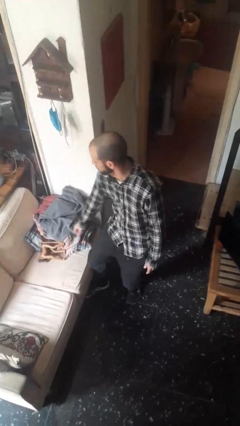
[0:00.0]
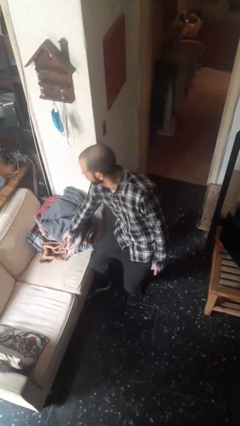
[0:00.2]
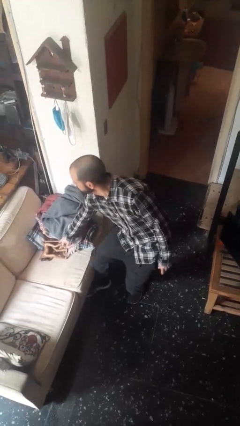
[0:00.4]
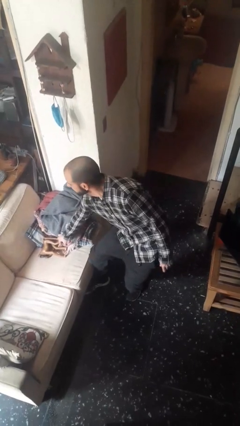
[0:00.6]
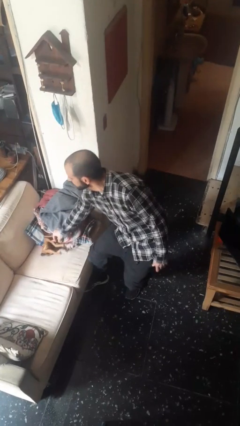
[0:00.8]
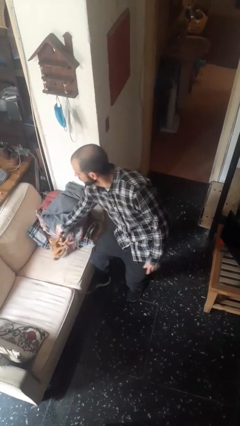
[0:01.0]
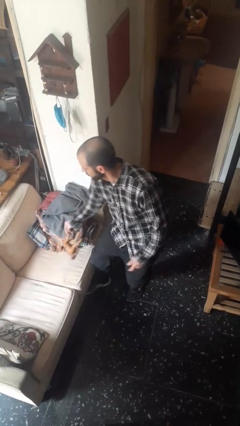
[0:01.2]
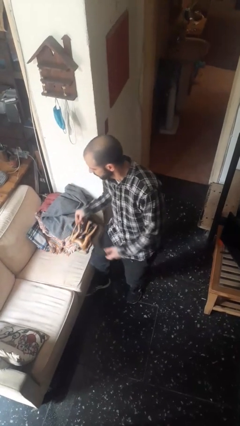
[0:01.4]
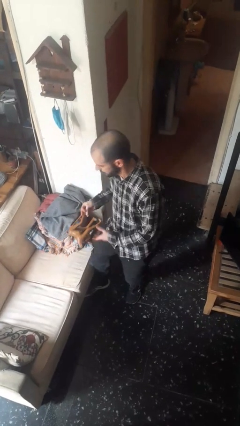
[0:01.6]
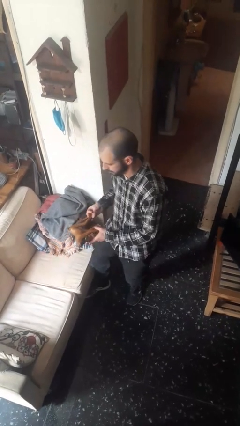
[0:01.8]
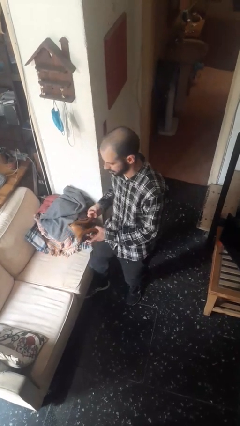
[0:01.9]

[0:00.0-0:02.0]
person picks up object from couch

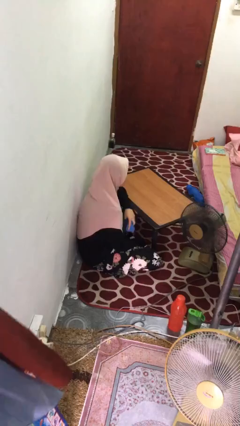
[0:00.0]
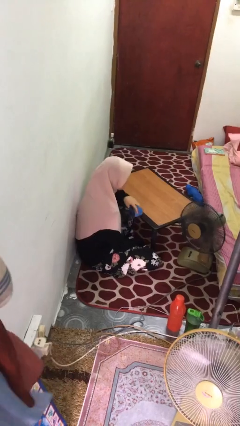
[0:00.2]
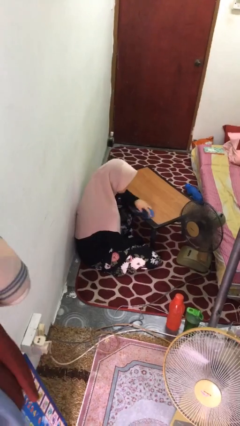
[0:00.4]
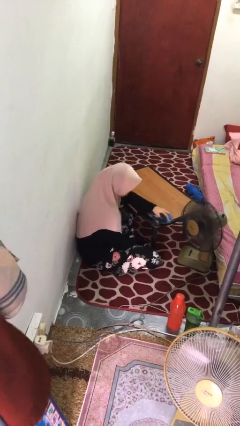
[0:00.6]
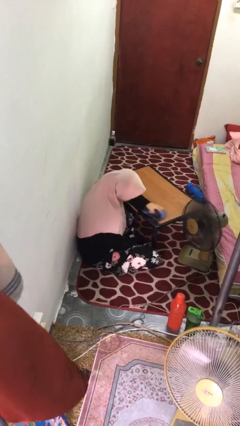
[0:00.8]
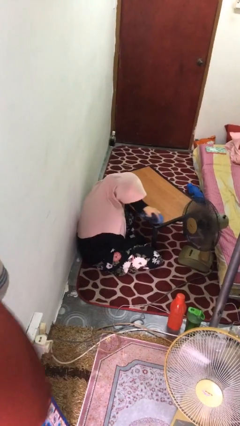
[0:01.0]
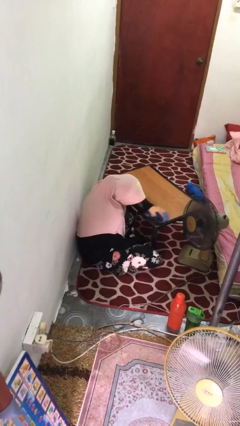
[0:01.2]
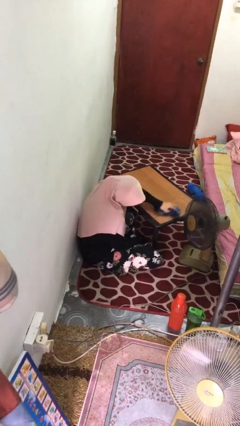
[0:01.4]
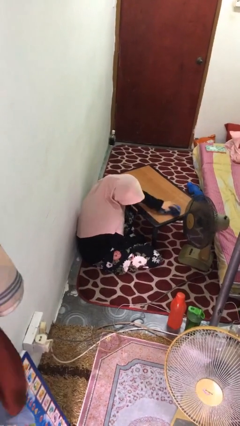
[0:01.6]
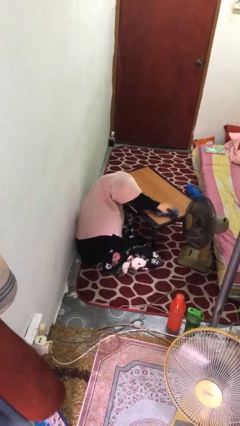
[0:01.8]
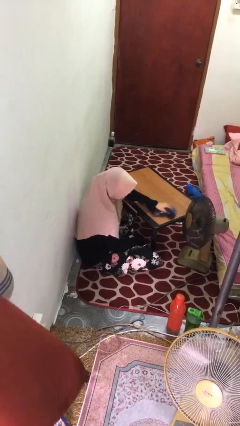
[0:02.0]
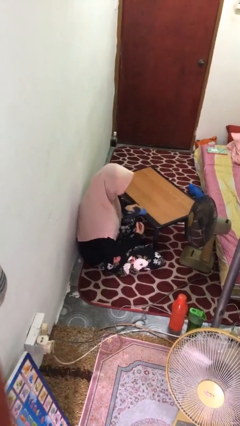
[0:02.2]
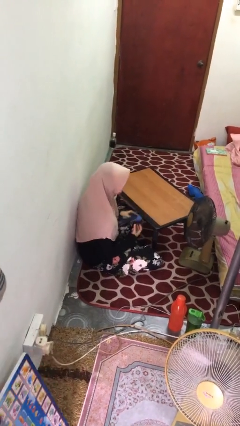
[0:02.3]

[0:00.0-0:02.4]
person cleans table with rag

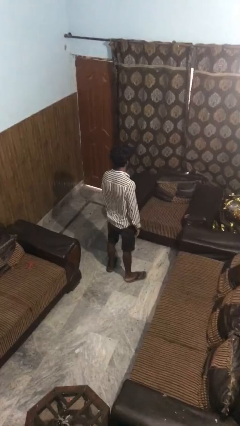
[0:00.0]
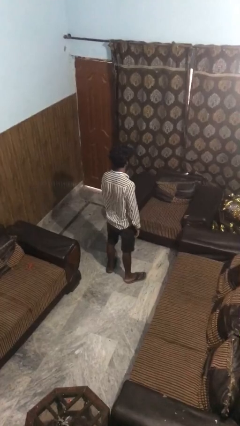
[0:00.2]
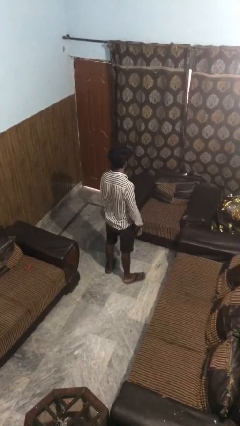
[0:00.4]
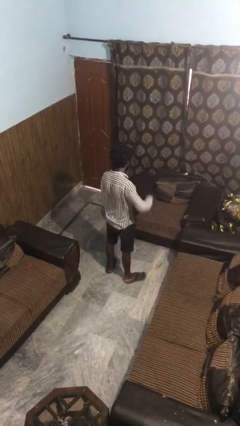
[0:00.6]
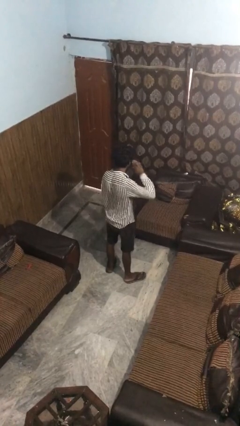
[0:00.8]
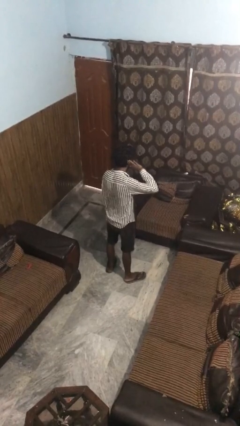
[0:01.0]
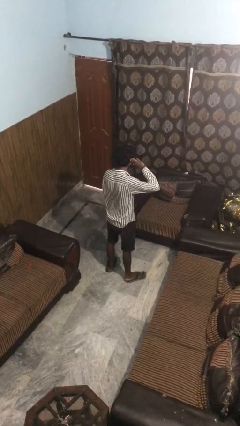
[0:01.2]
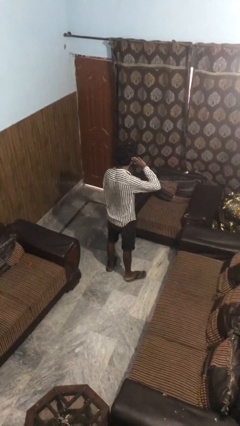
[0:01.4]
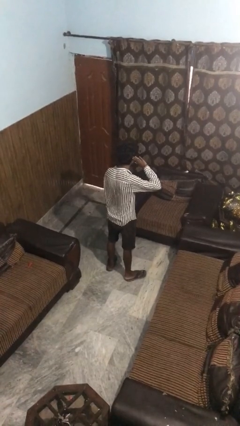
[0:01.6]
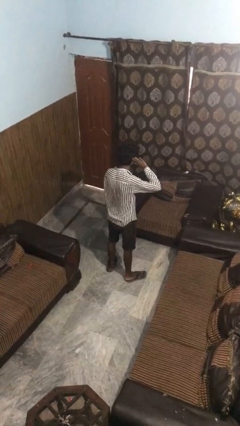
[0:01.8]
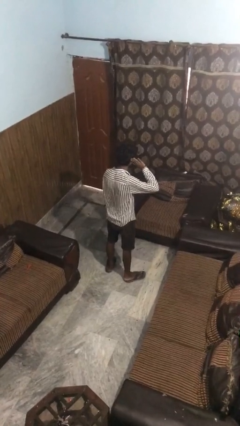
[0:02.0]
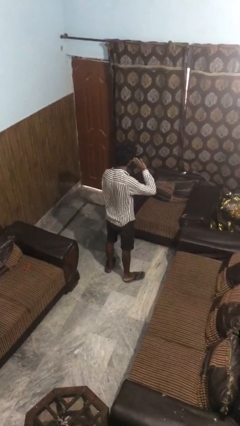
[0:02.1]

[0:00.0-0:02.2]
person gestures listen closely

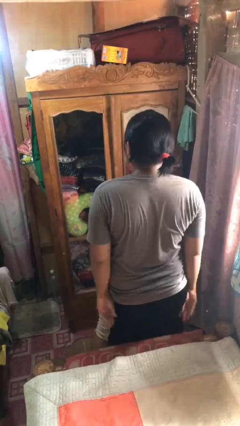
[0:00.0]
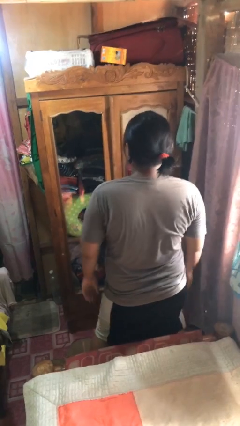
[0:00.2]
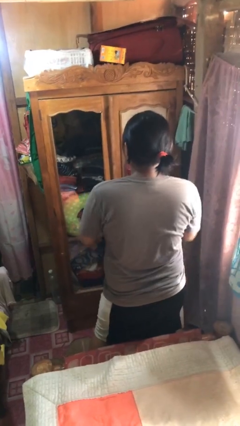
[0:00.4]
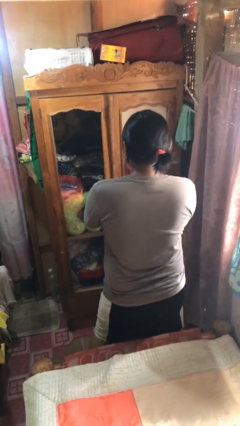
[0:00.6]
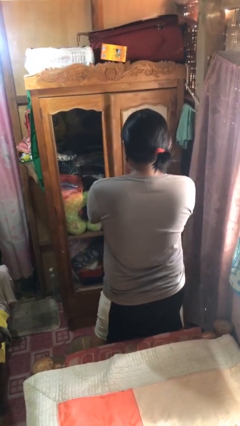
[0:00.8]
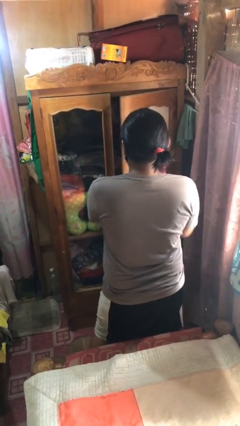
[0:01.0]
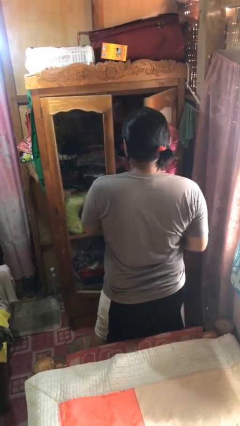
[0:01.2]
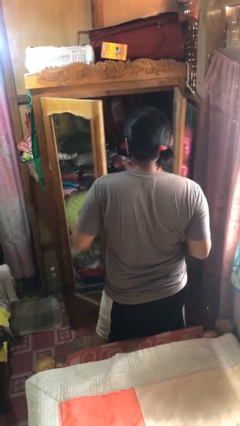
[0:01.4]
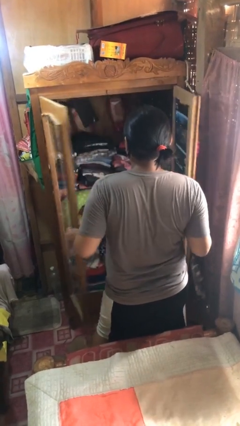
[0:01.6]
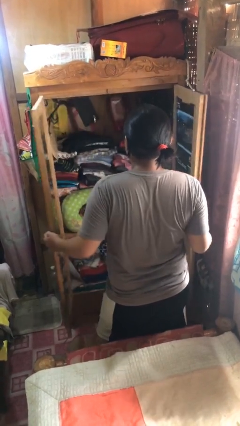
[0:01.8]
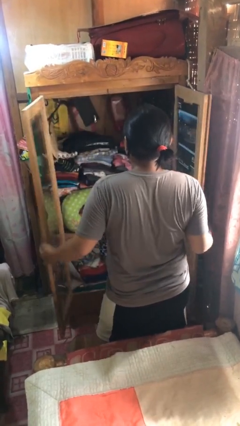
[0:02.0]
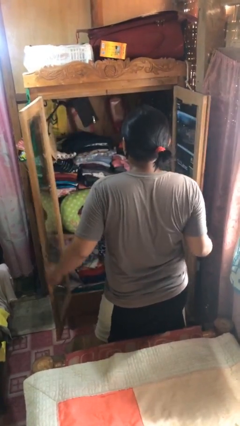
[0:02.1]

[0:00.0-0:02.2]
person opens closet door

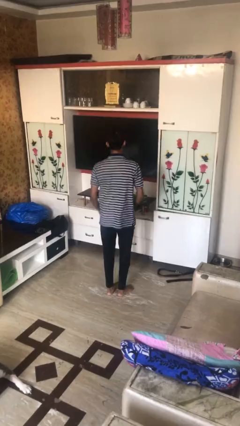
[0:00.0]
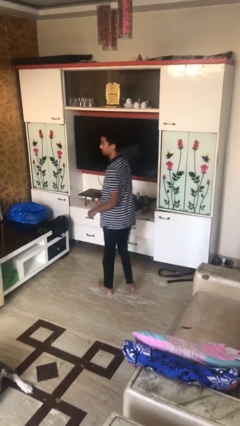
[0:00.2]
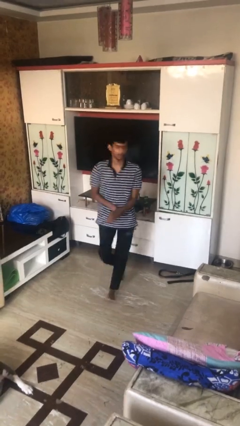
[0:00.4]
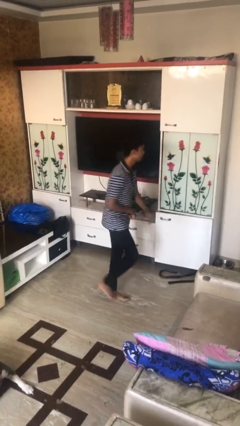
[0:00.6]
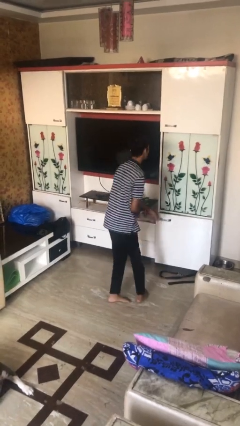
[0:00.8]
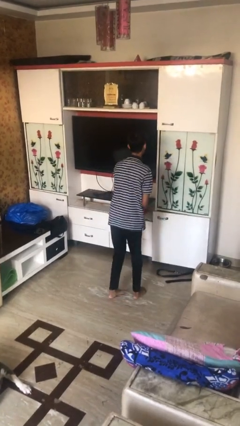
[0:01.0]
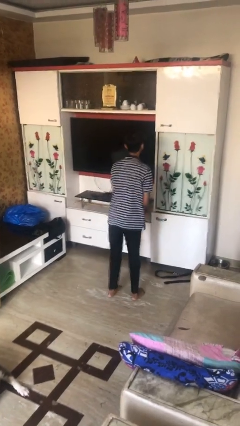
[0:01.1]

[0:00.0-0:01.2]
person twirls

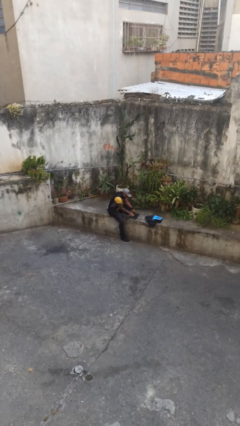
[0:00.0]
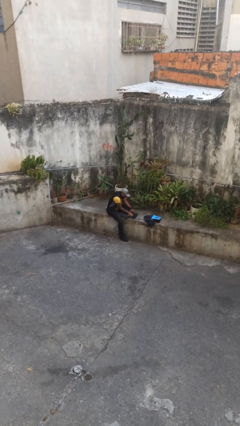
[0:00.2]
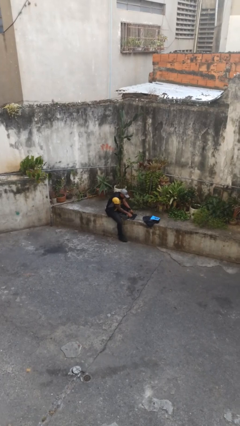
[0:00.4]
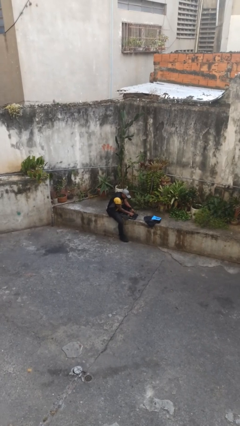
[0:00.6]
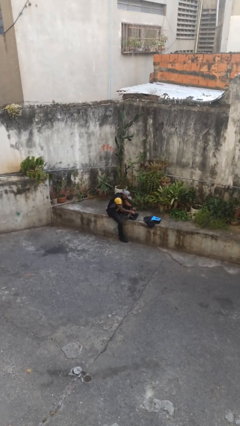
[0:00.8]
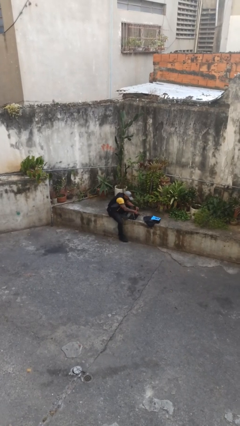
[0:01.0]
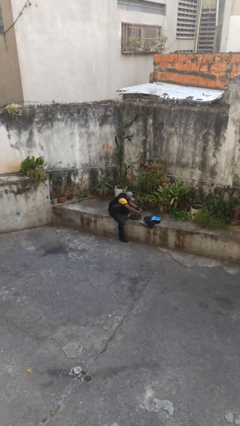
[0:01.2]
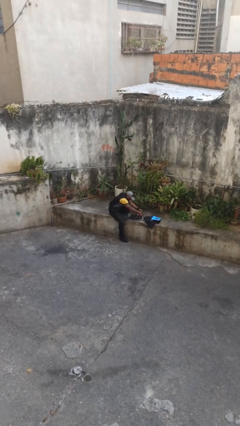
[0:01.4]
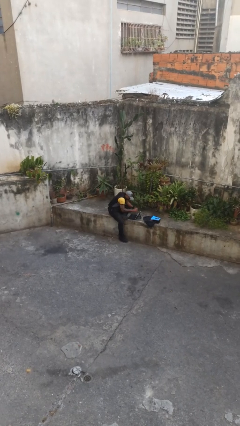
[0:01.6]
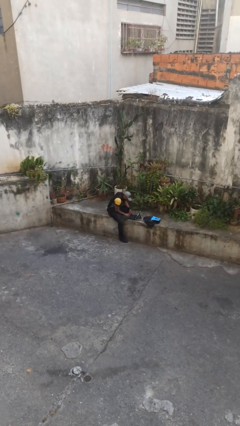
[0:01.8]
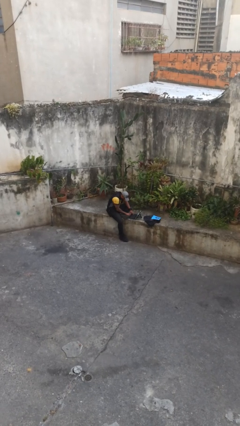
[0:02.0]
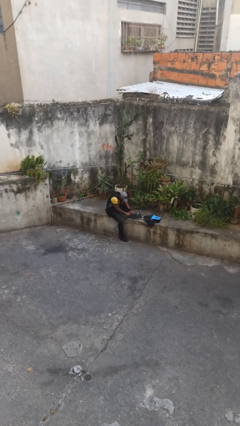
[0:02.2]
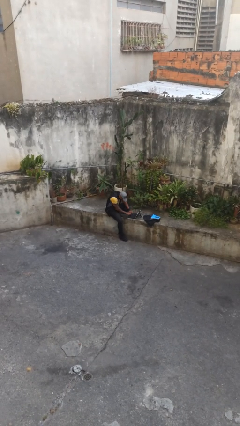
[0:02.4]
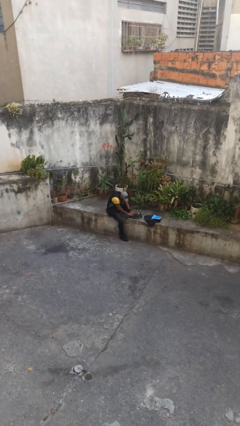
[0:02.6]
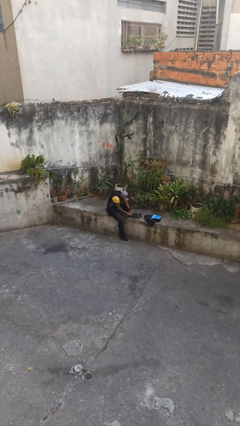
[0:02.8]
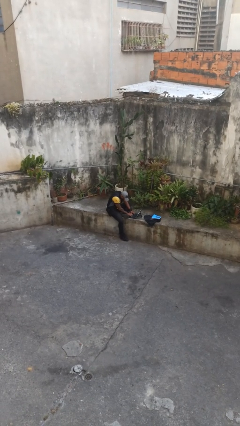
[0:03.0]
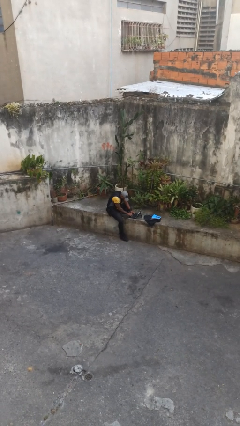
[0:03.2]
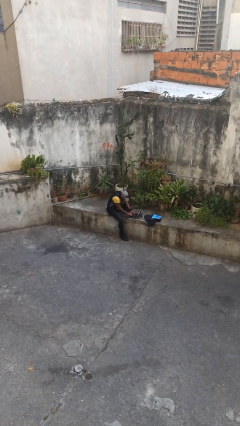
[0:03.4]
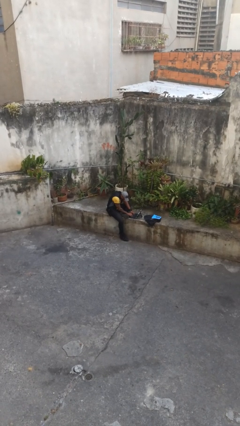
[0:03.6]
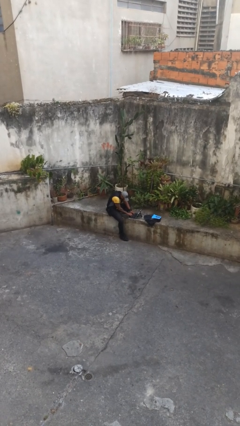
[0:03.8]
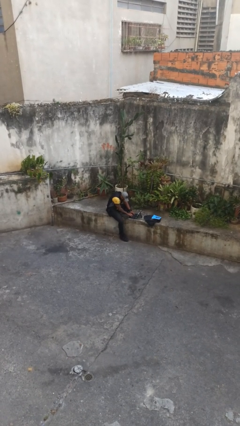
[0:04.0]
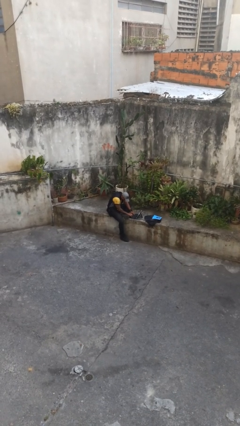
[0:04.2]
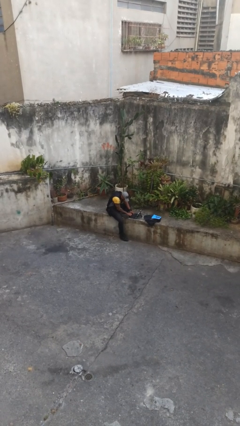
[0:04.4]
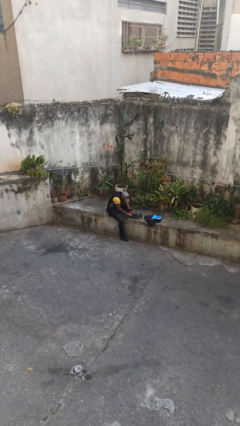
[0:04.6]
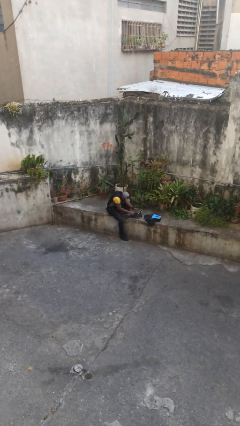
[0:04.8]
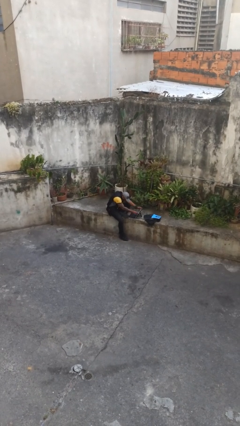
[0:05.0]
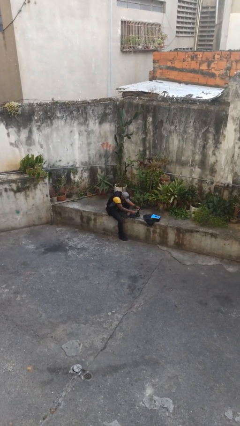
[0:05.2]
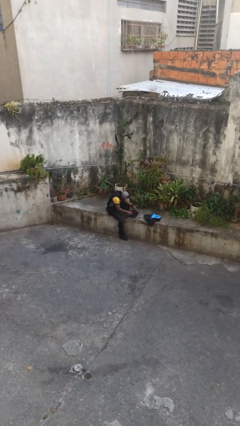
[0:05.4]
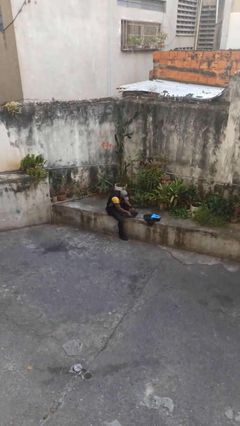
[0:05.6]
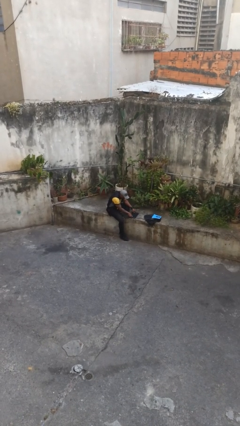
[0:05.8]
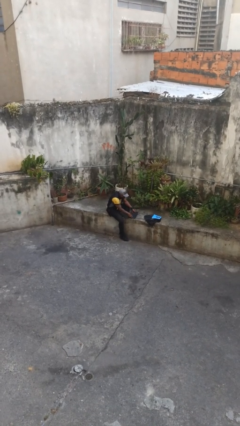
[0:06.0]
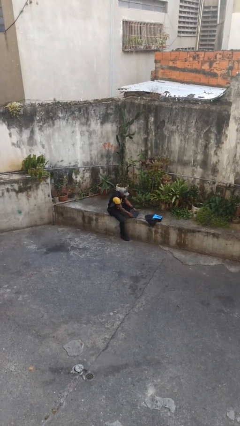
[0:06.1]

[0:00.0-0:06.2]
person interacts with laptop

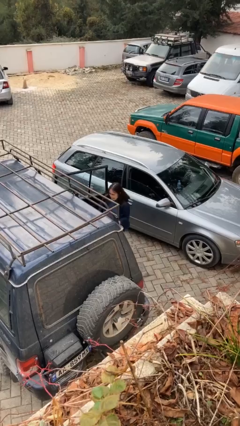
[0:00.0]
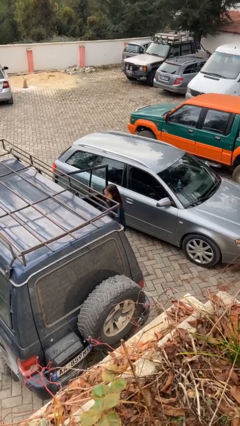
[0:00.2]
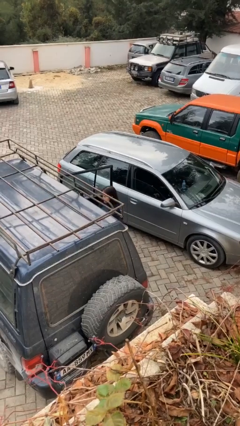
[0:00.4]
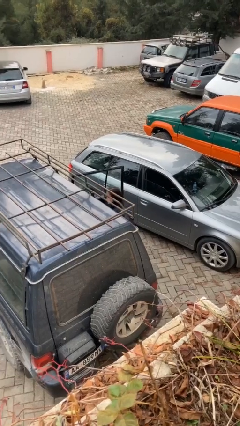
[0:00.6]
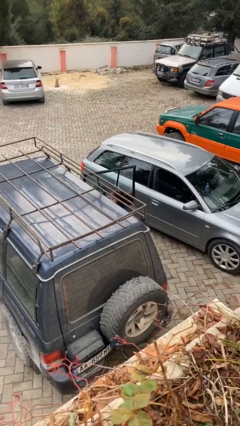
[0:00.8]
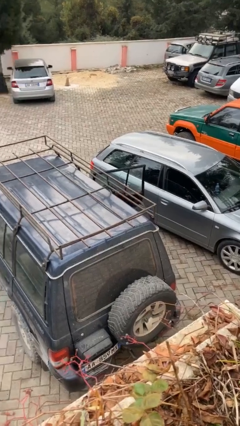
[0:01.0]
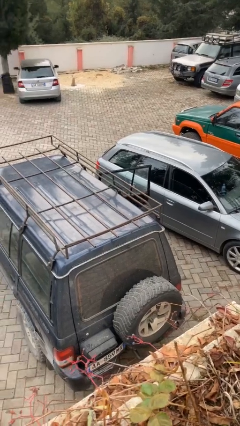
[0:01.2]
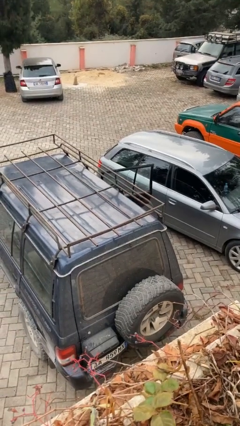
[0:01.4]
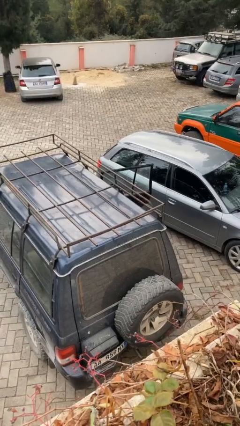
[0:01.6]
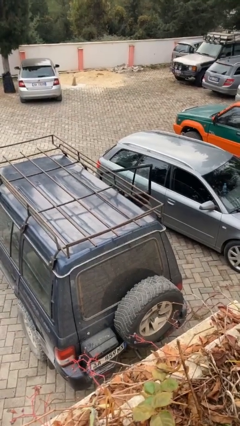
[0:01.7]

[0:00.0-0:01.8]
person loads car
